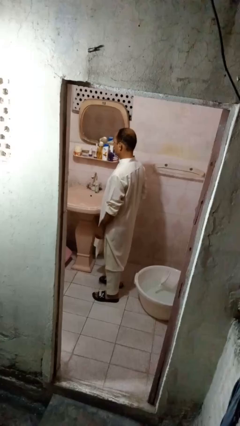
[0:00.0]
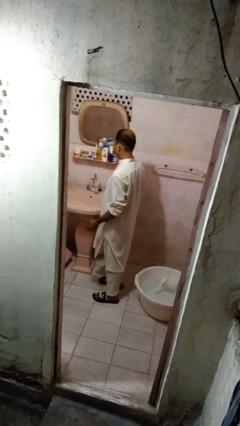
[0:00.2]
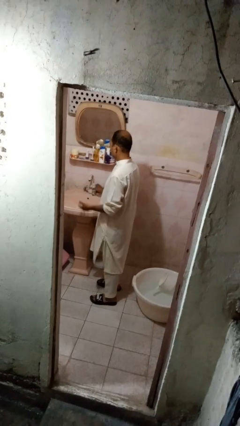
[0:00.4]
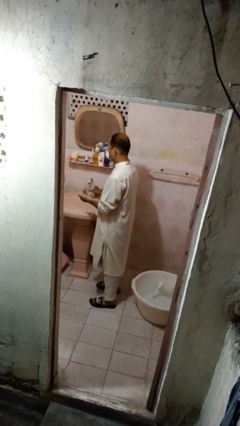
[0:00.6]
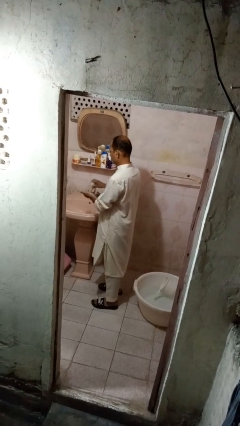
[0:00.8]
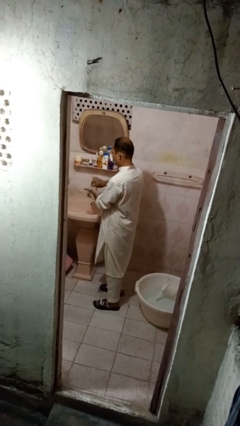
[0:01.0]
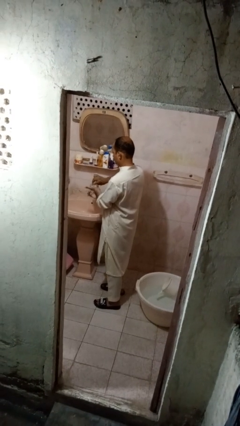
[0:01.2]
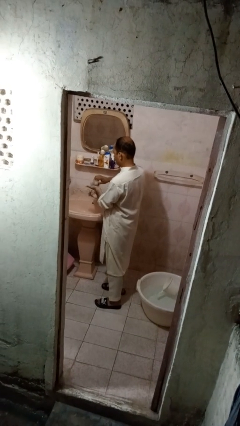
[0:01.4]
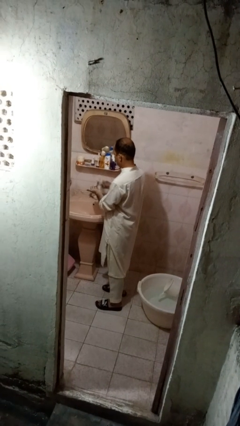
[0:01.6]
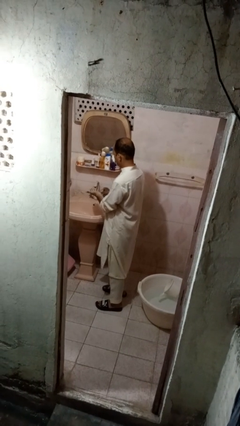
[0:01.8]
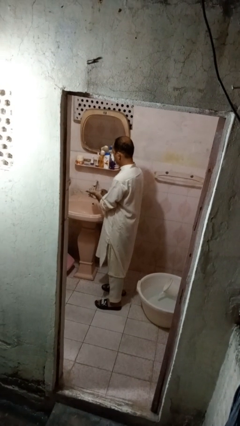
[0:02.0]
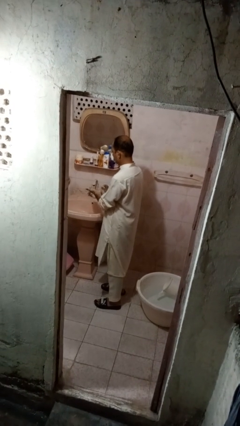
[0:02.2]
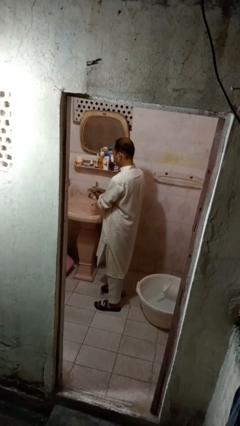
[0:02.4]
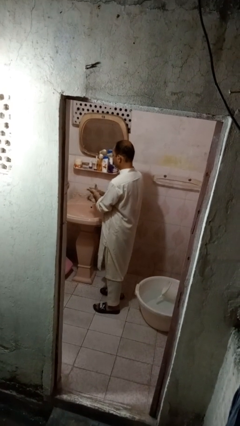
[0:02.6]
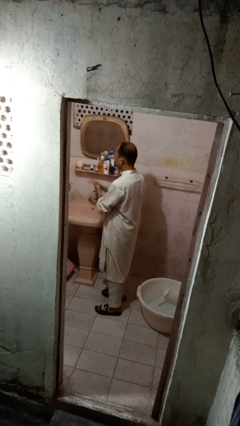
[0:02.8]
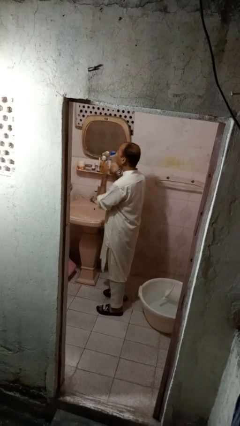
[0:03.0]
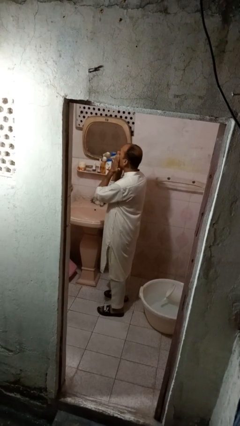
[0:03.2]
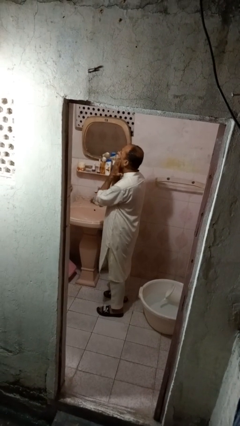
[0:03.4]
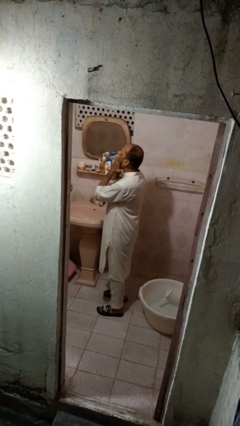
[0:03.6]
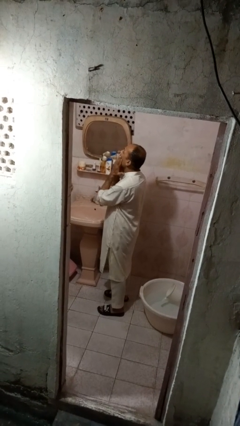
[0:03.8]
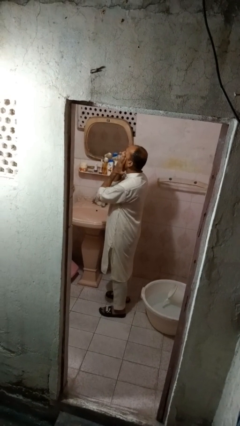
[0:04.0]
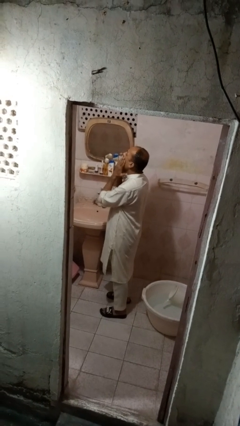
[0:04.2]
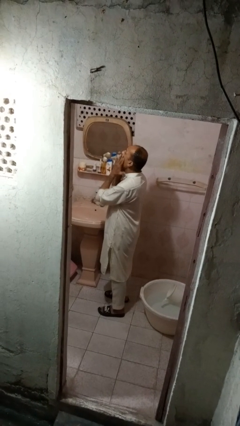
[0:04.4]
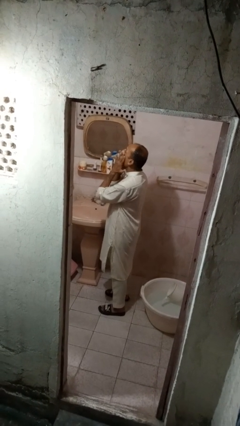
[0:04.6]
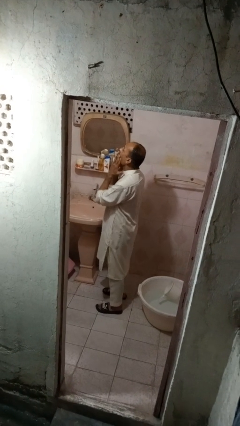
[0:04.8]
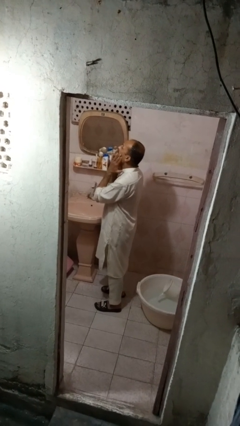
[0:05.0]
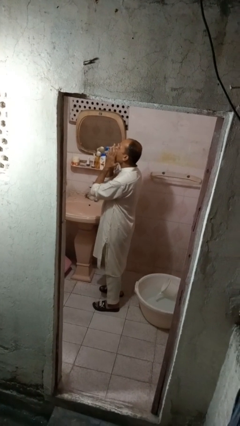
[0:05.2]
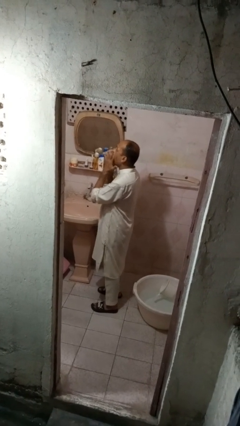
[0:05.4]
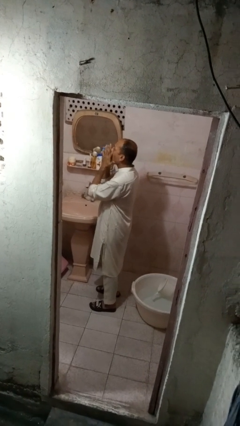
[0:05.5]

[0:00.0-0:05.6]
person applies facial moisturizer

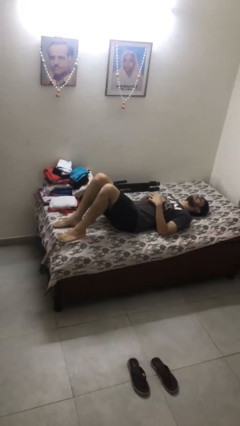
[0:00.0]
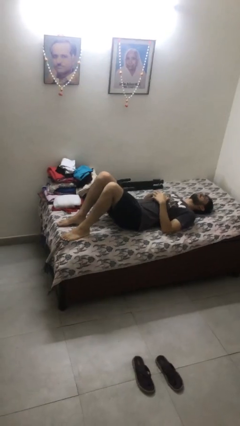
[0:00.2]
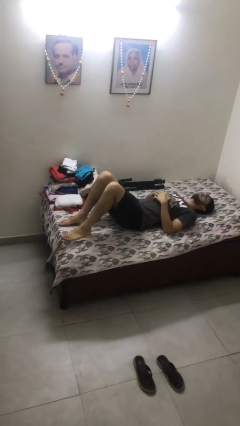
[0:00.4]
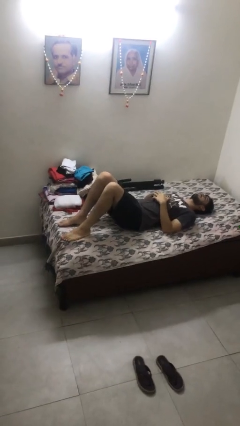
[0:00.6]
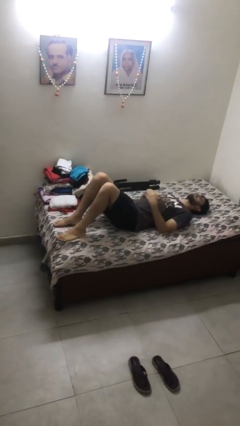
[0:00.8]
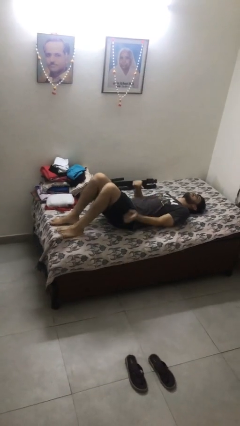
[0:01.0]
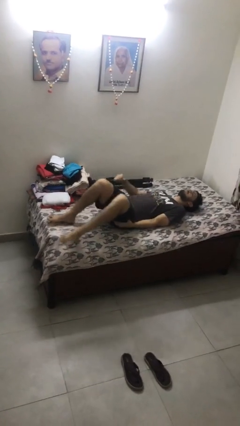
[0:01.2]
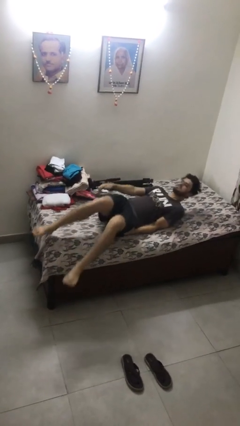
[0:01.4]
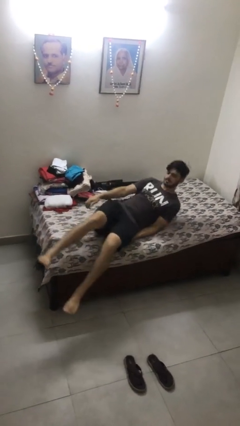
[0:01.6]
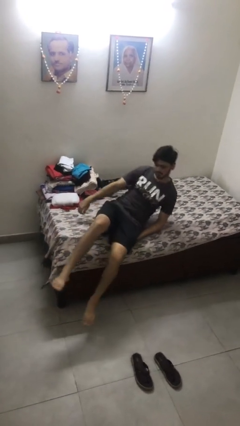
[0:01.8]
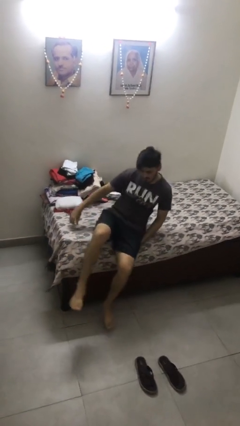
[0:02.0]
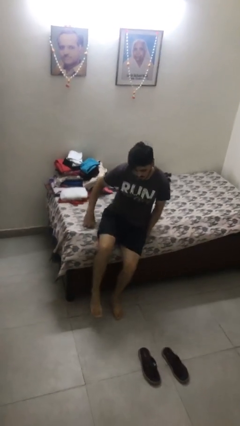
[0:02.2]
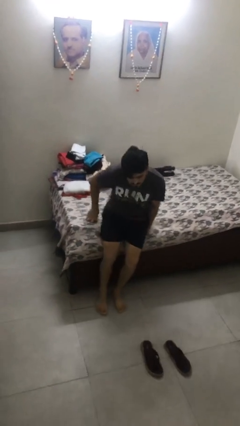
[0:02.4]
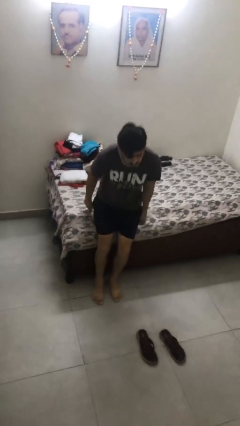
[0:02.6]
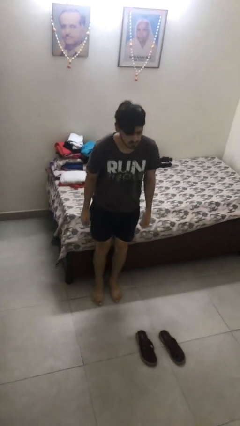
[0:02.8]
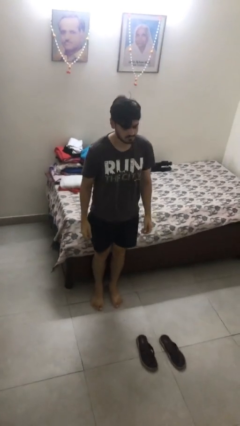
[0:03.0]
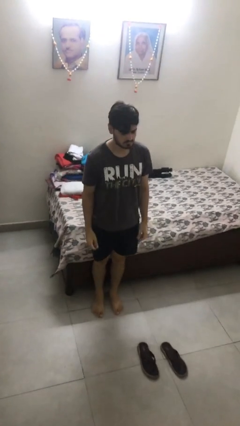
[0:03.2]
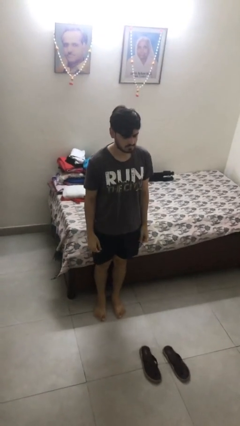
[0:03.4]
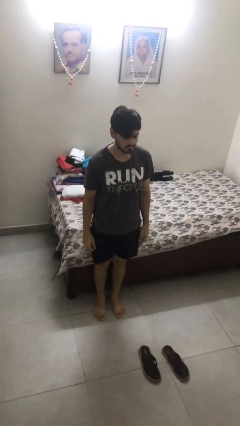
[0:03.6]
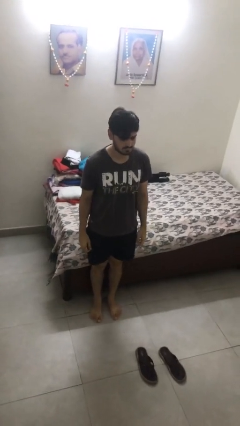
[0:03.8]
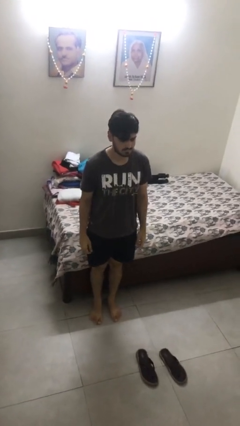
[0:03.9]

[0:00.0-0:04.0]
person stands up

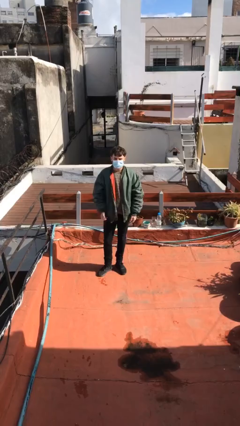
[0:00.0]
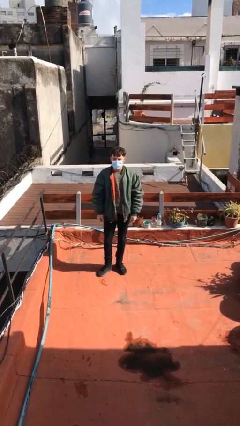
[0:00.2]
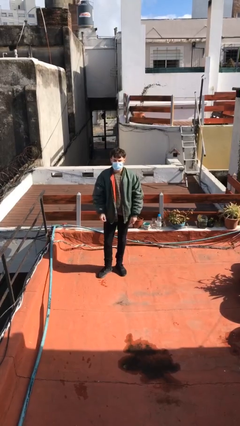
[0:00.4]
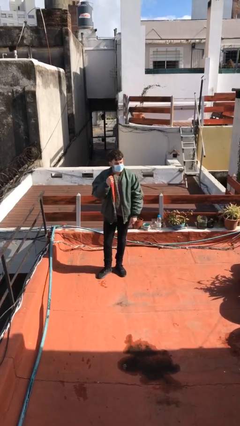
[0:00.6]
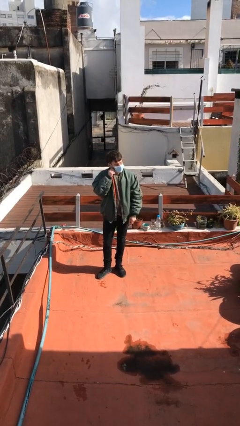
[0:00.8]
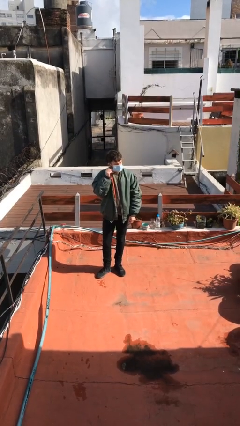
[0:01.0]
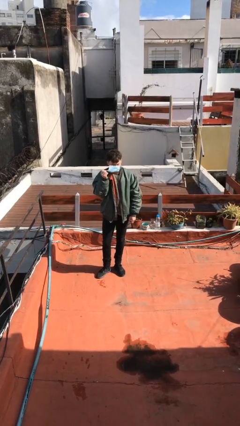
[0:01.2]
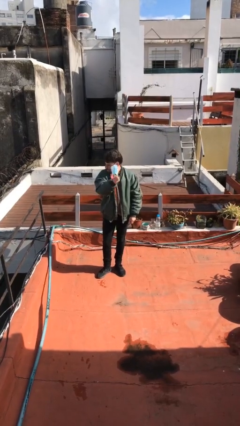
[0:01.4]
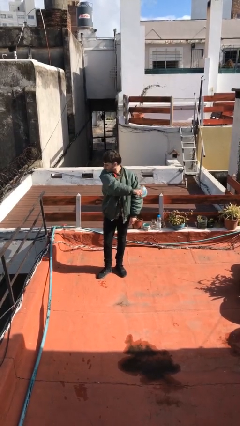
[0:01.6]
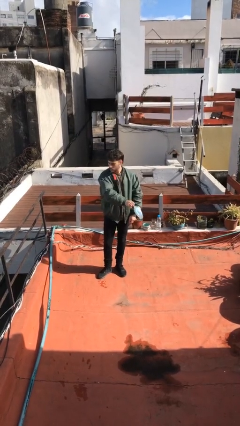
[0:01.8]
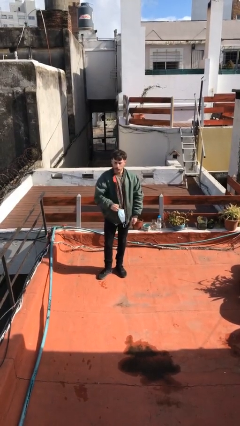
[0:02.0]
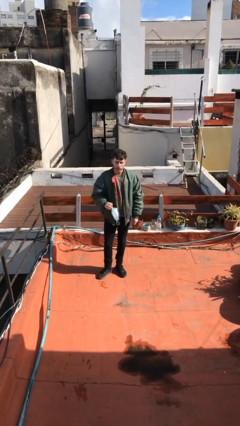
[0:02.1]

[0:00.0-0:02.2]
person takes off facemask

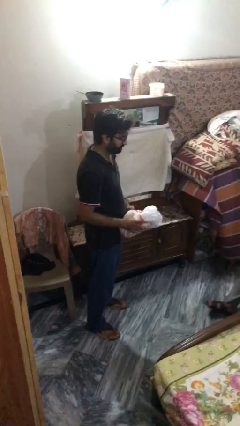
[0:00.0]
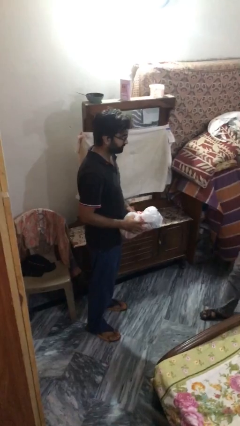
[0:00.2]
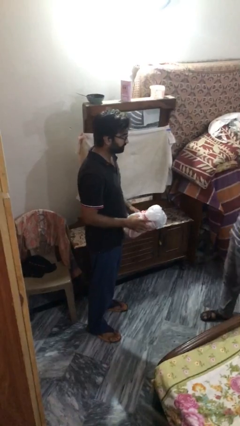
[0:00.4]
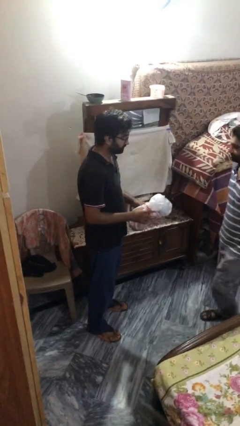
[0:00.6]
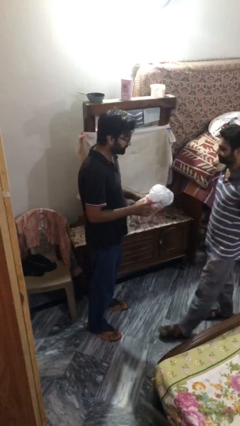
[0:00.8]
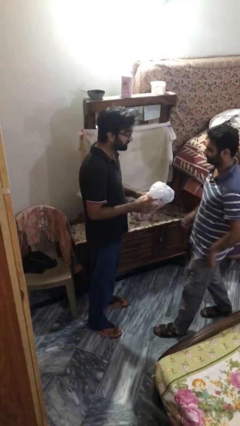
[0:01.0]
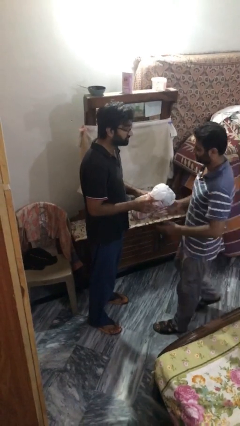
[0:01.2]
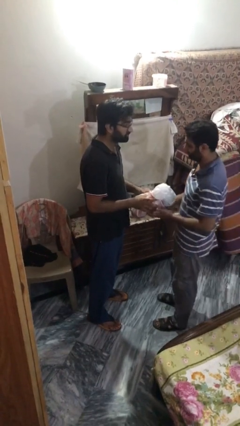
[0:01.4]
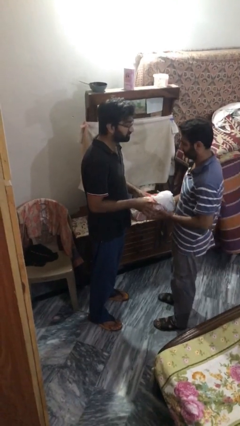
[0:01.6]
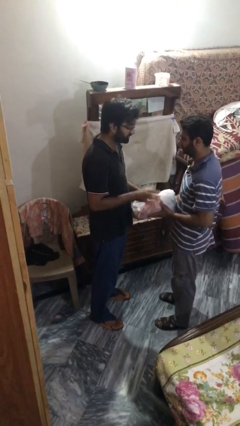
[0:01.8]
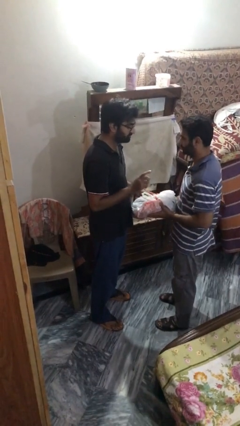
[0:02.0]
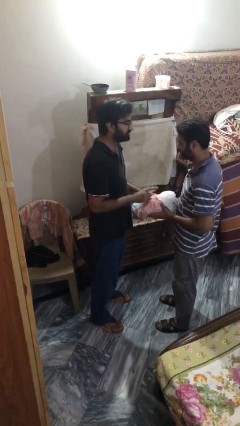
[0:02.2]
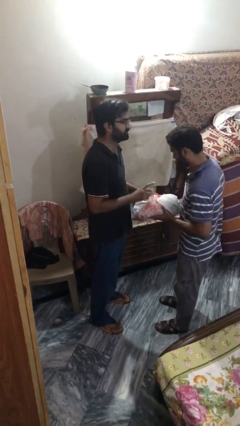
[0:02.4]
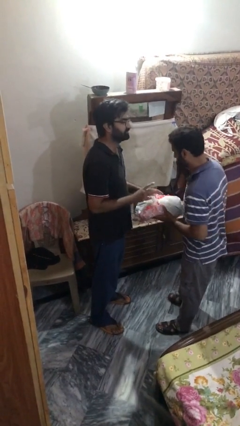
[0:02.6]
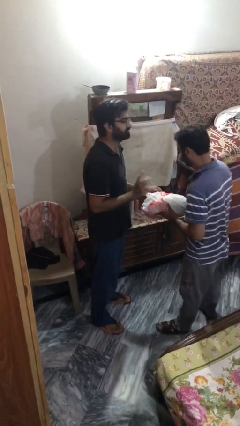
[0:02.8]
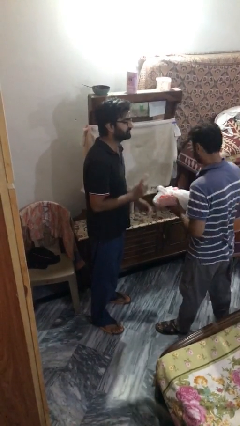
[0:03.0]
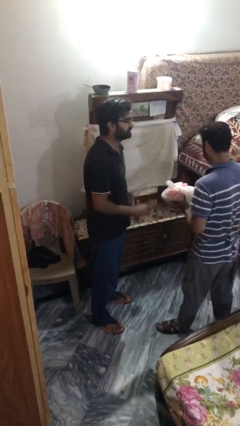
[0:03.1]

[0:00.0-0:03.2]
person transfers object to person

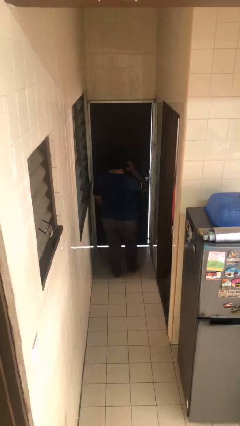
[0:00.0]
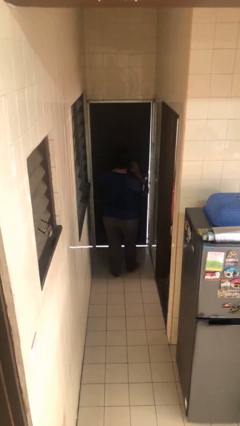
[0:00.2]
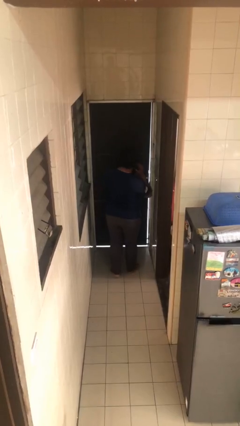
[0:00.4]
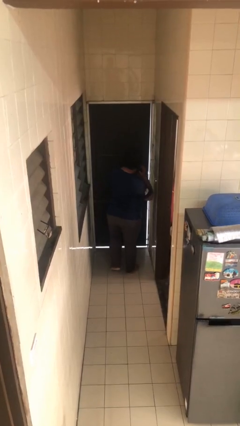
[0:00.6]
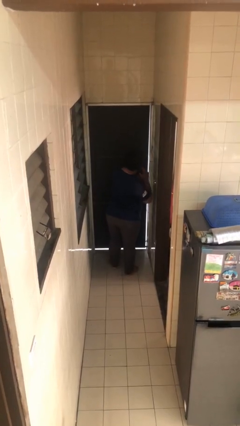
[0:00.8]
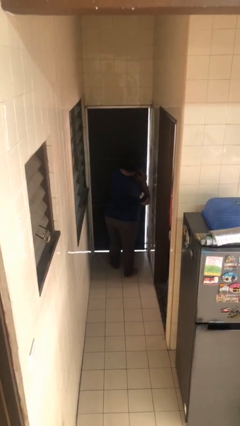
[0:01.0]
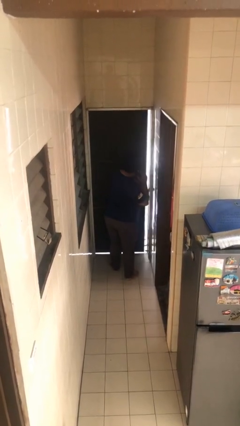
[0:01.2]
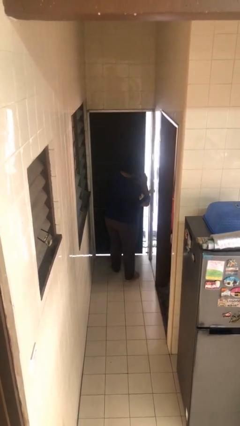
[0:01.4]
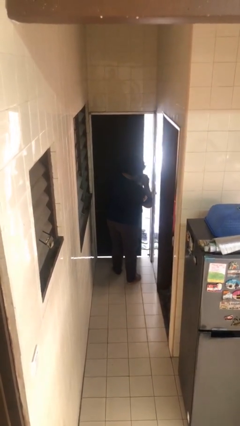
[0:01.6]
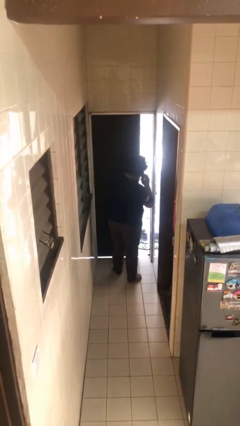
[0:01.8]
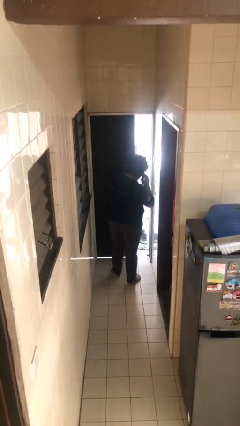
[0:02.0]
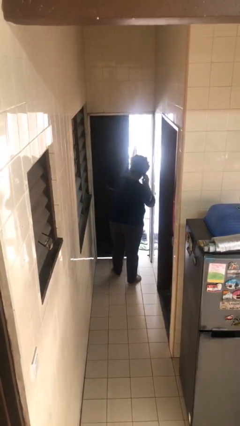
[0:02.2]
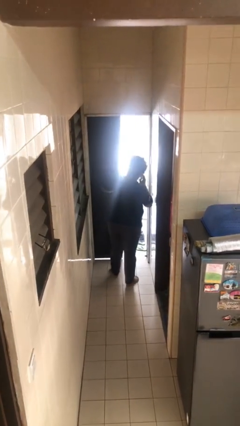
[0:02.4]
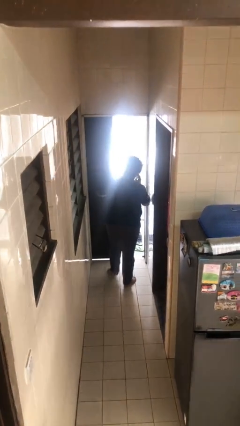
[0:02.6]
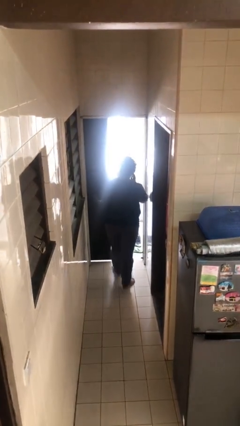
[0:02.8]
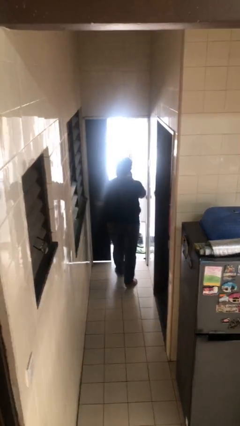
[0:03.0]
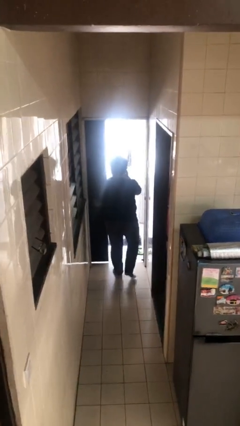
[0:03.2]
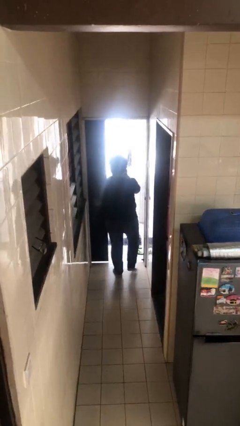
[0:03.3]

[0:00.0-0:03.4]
person opens facility door
